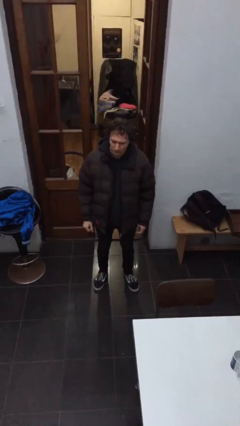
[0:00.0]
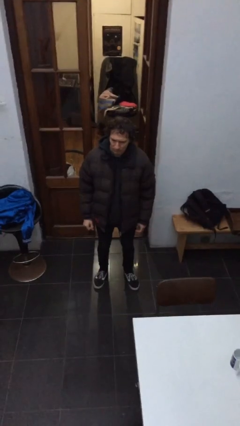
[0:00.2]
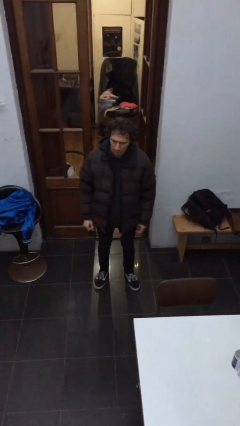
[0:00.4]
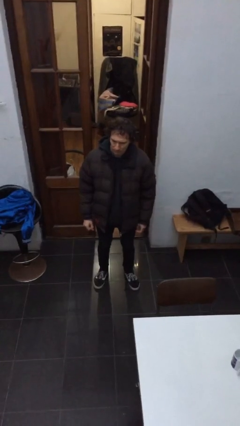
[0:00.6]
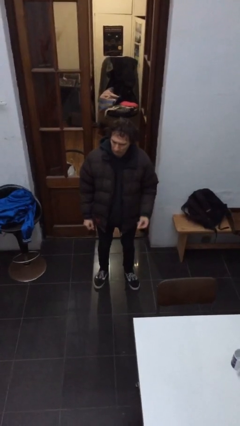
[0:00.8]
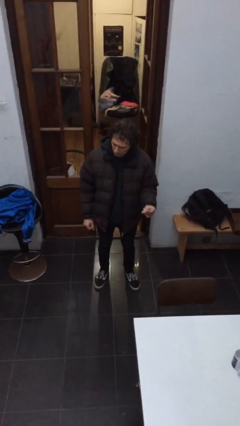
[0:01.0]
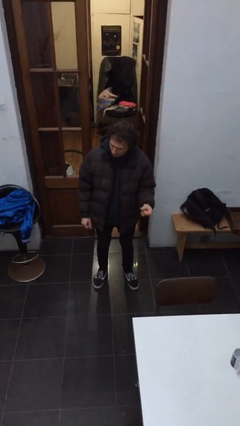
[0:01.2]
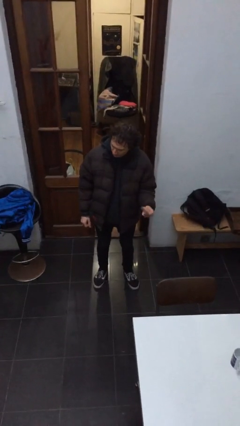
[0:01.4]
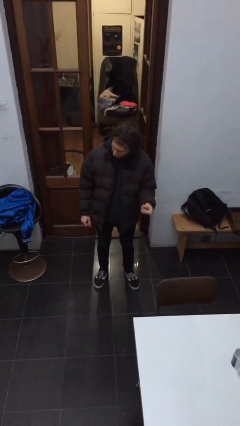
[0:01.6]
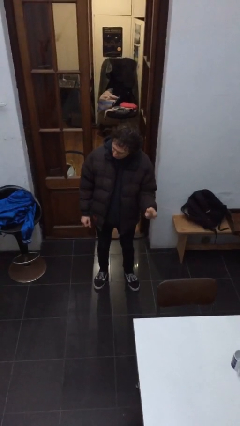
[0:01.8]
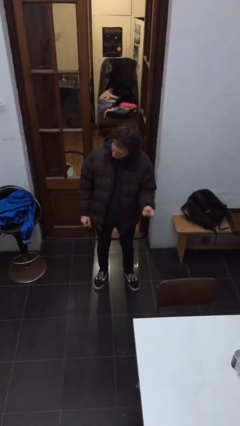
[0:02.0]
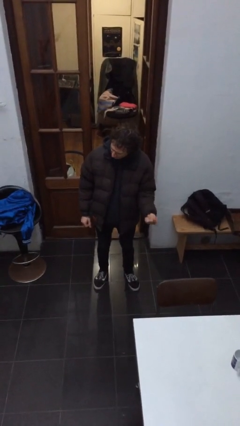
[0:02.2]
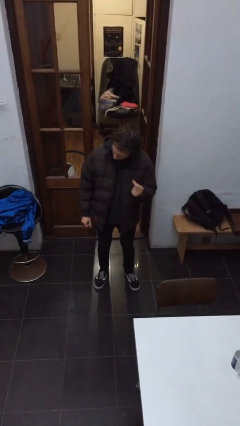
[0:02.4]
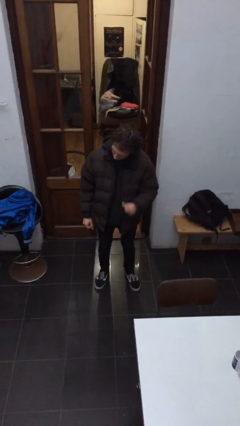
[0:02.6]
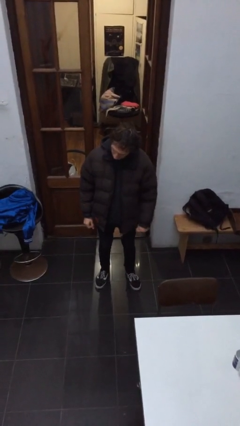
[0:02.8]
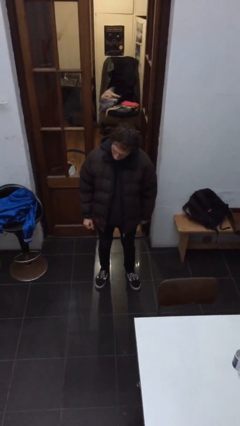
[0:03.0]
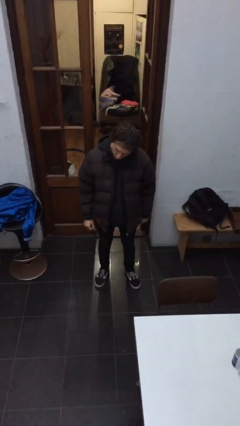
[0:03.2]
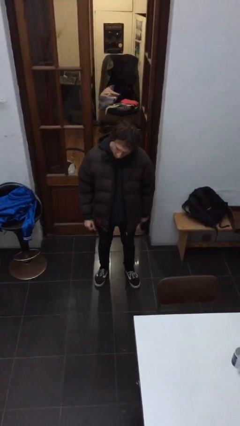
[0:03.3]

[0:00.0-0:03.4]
person snaps fingers

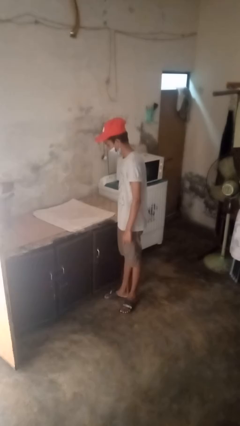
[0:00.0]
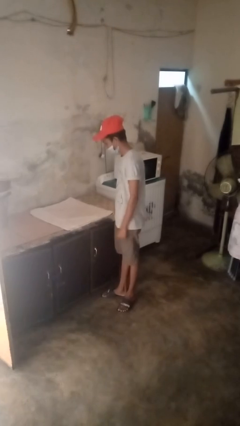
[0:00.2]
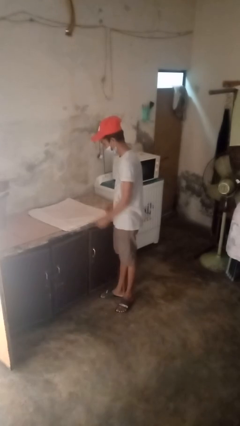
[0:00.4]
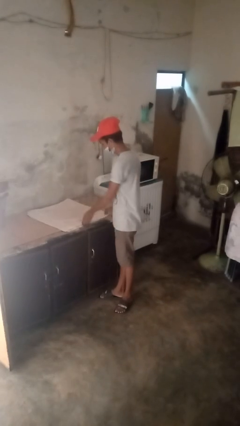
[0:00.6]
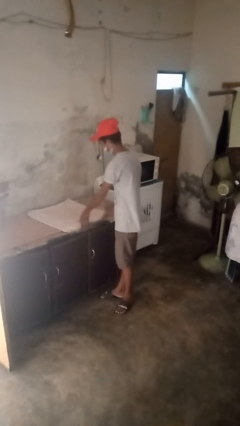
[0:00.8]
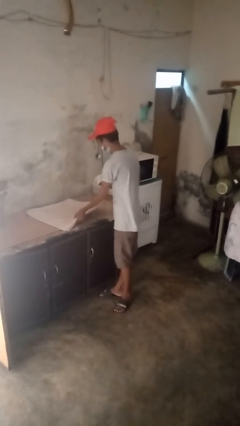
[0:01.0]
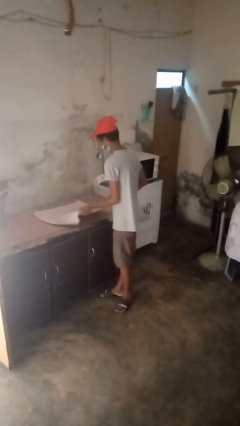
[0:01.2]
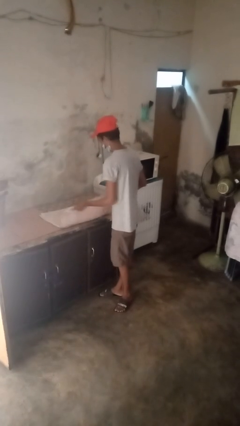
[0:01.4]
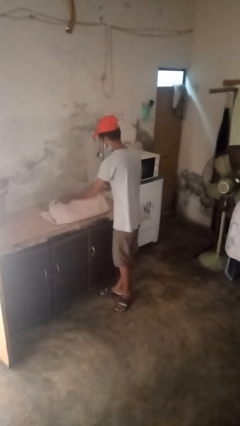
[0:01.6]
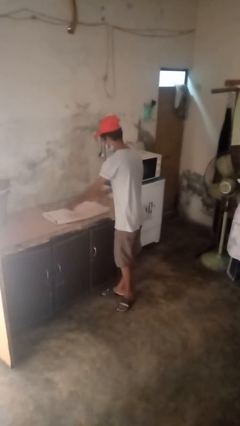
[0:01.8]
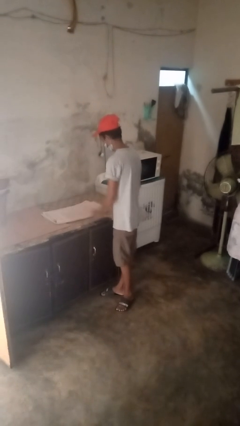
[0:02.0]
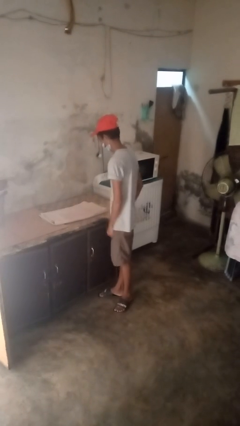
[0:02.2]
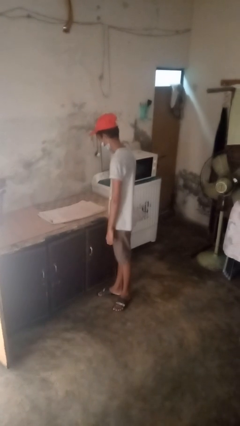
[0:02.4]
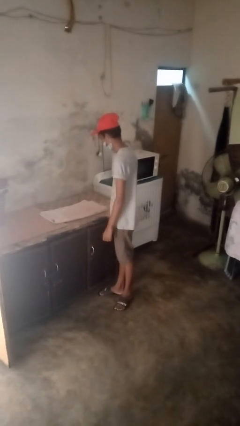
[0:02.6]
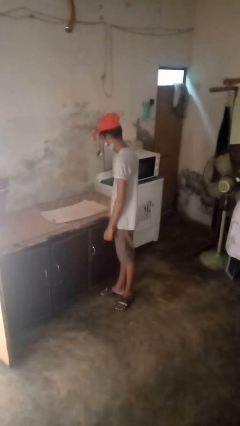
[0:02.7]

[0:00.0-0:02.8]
person folds tablecloth

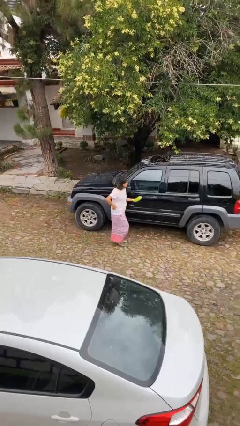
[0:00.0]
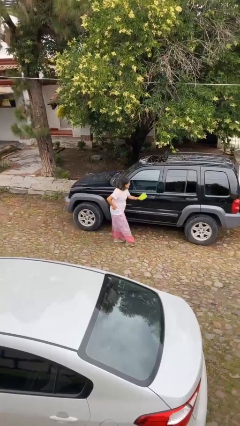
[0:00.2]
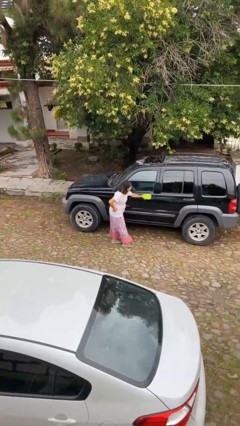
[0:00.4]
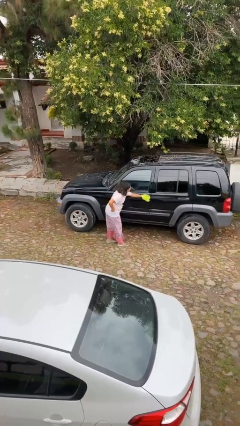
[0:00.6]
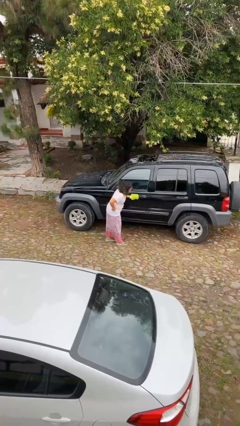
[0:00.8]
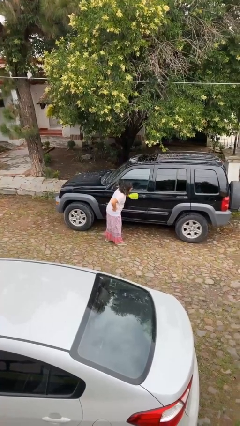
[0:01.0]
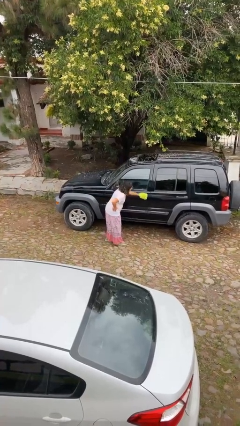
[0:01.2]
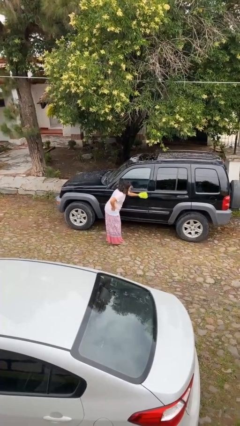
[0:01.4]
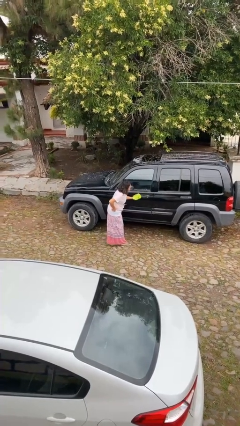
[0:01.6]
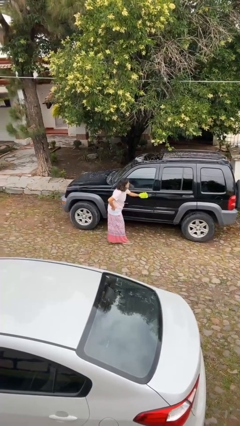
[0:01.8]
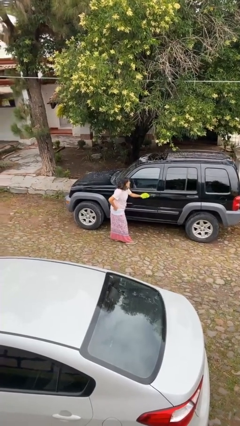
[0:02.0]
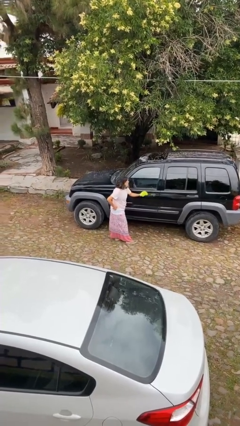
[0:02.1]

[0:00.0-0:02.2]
person polishes car with rag

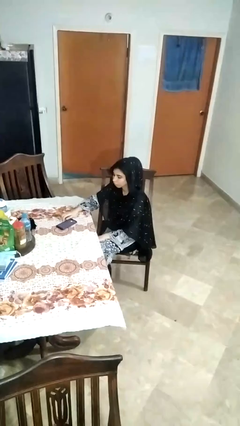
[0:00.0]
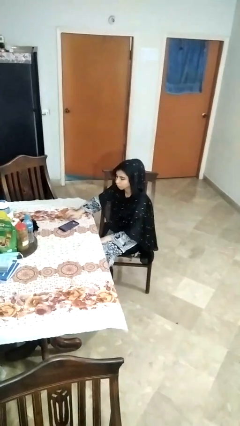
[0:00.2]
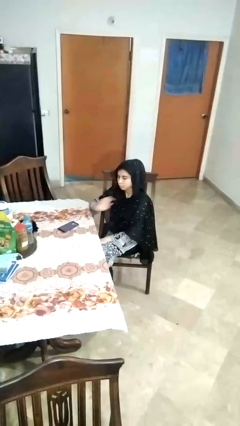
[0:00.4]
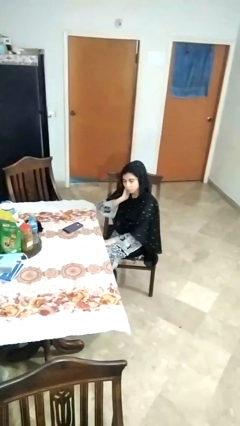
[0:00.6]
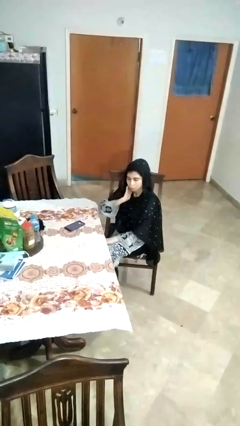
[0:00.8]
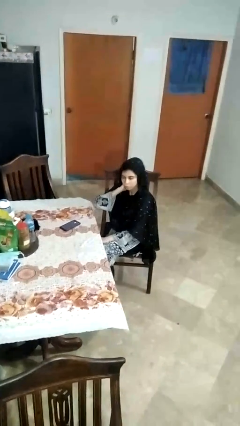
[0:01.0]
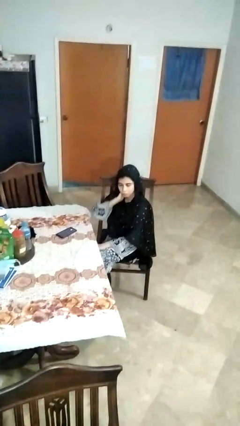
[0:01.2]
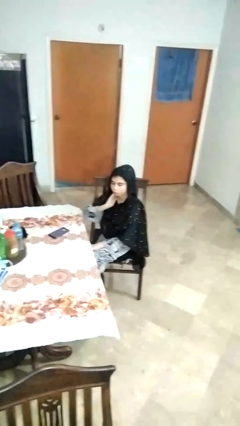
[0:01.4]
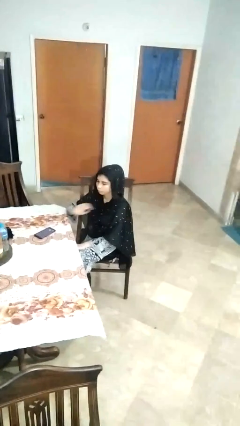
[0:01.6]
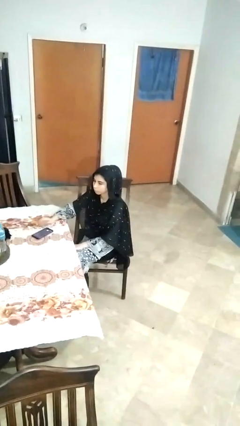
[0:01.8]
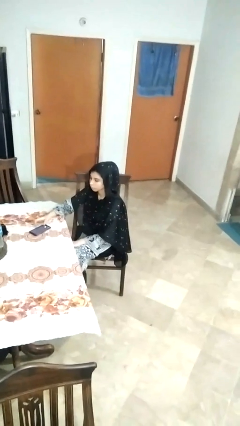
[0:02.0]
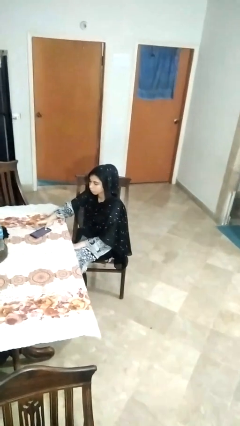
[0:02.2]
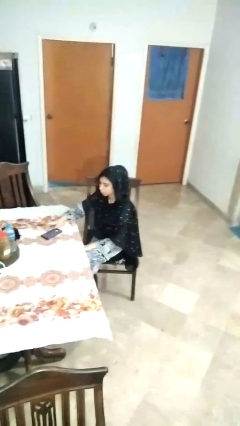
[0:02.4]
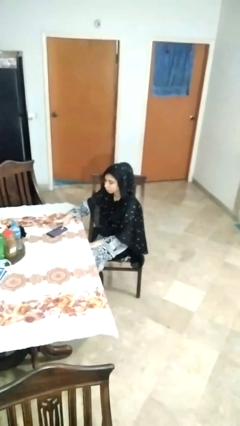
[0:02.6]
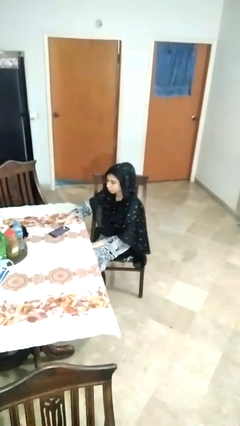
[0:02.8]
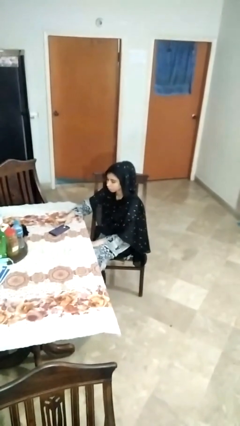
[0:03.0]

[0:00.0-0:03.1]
person rubs neck

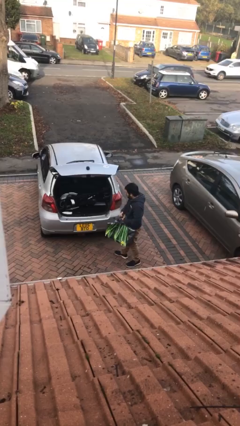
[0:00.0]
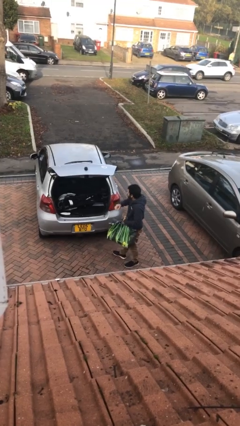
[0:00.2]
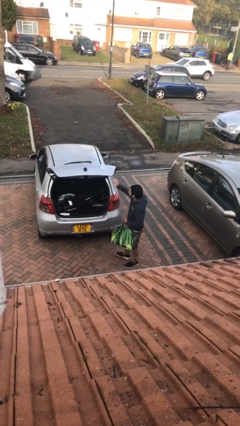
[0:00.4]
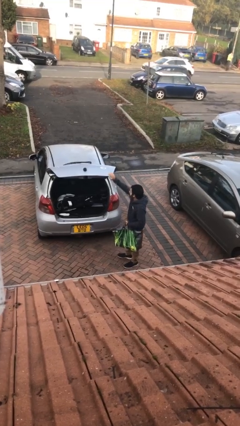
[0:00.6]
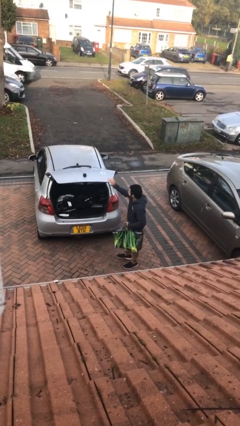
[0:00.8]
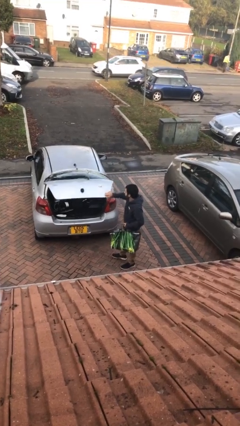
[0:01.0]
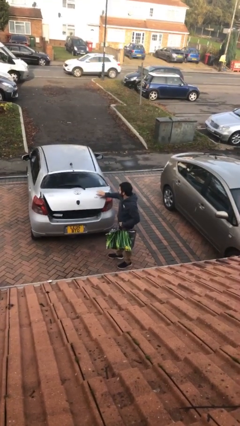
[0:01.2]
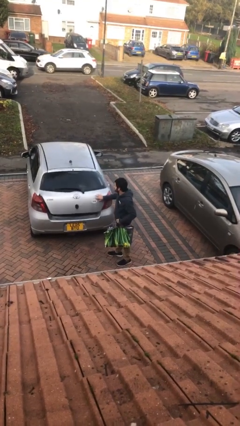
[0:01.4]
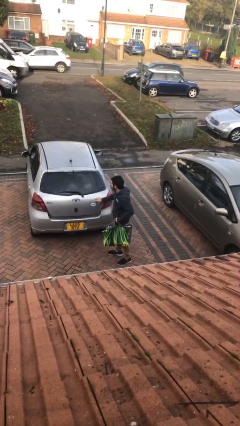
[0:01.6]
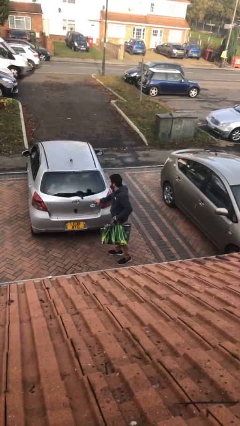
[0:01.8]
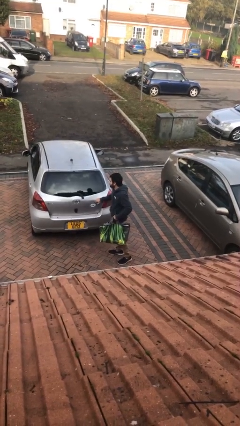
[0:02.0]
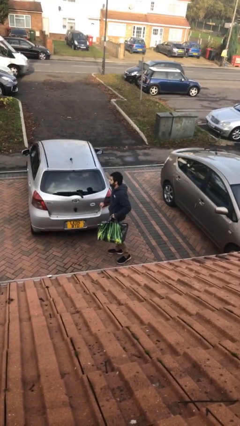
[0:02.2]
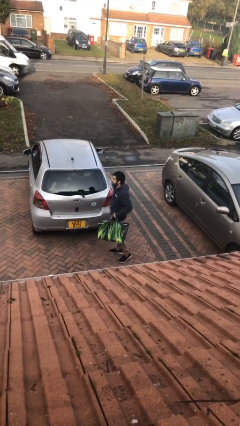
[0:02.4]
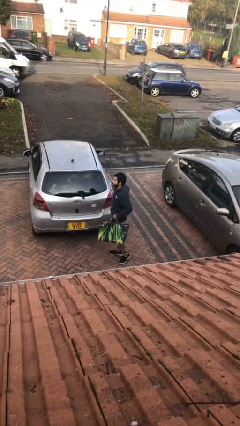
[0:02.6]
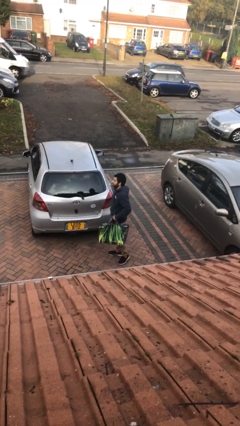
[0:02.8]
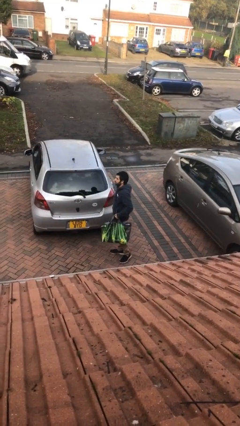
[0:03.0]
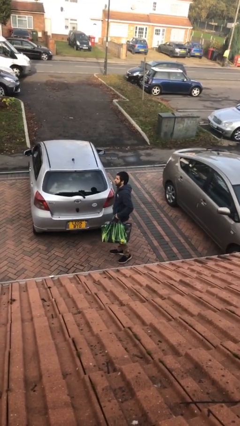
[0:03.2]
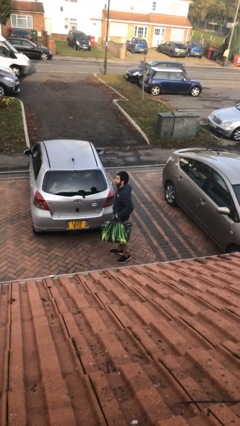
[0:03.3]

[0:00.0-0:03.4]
person closes car trunk

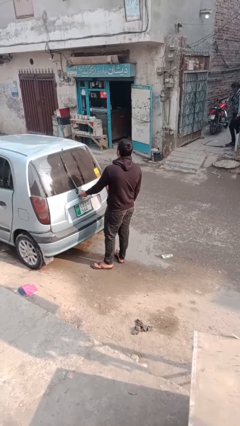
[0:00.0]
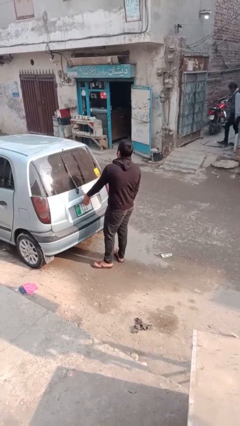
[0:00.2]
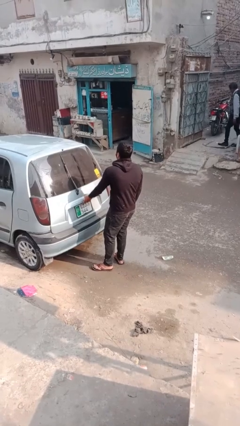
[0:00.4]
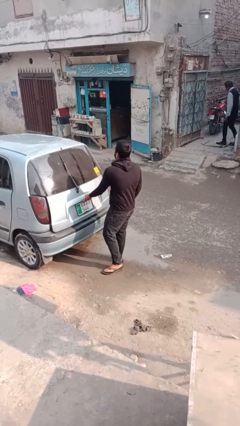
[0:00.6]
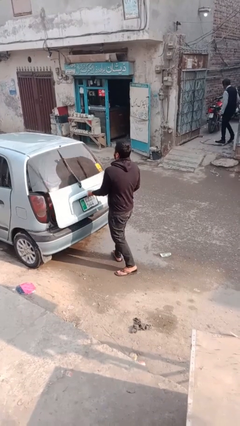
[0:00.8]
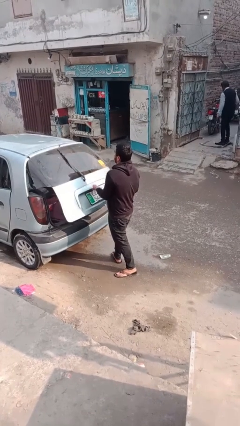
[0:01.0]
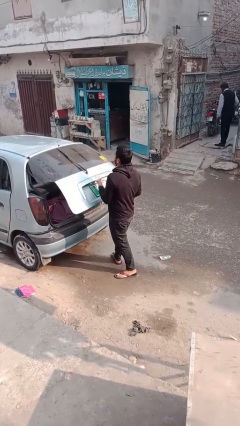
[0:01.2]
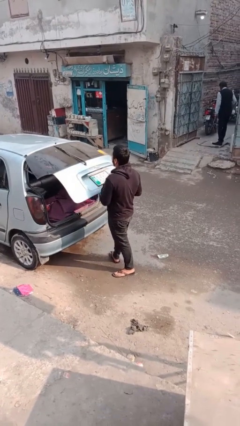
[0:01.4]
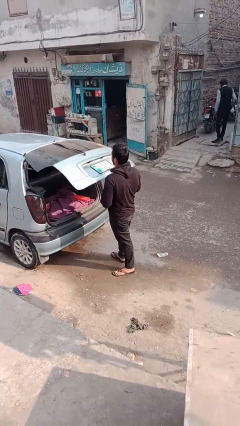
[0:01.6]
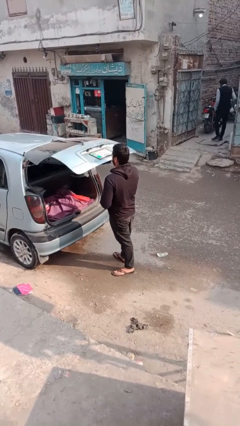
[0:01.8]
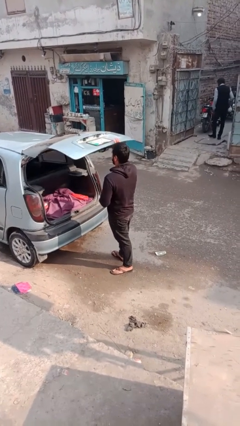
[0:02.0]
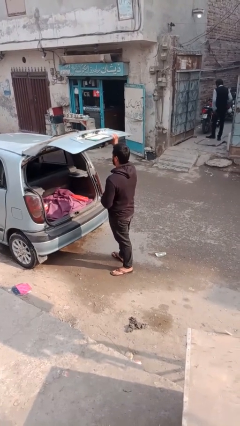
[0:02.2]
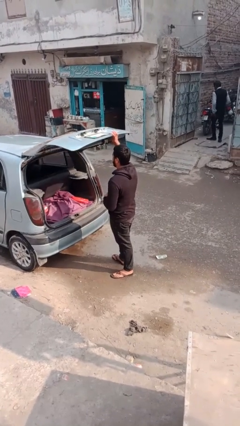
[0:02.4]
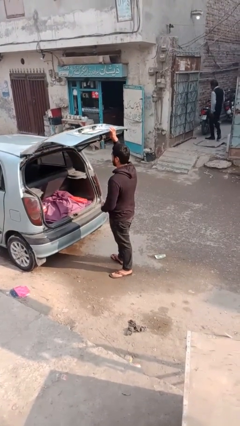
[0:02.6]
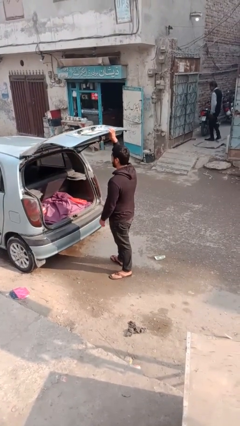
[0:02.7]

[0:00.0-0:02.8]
person opens car trunk
